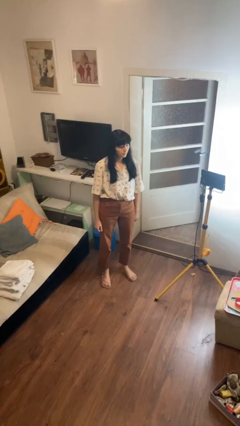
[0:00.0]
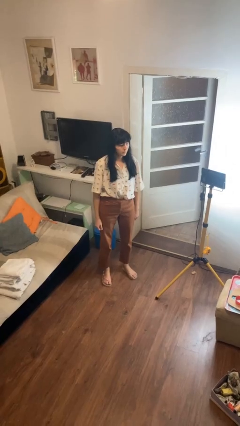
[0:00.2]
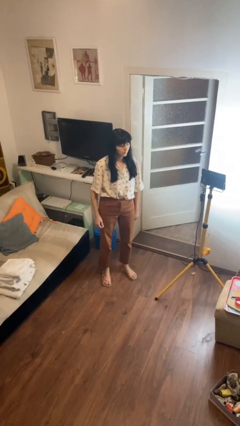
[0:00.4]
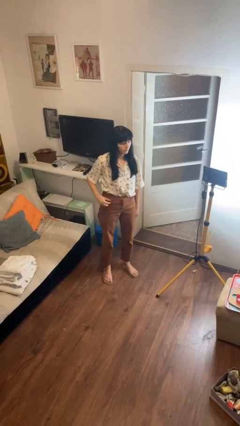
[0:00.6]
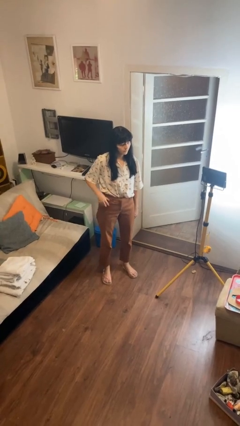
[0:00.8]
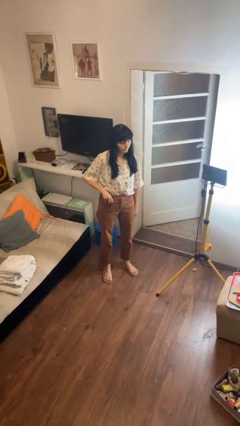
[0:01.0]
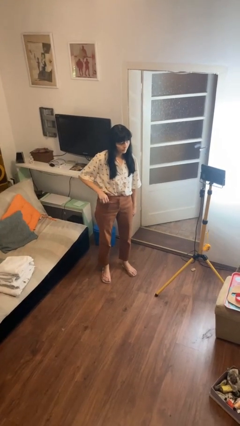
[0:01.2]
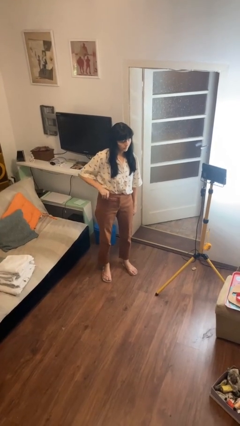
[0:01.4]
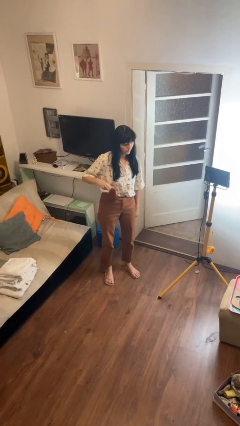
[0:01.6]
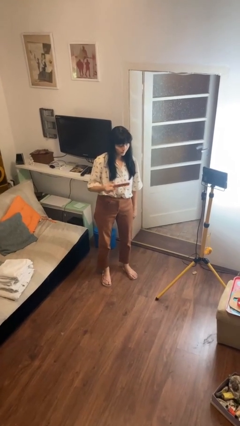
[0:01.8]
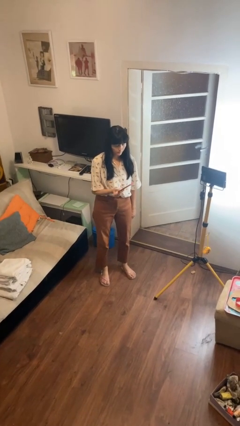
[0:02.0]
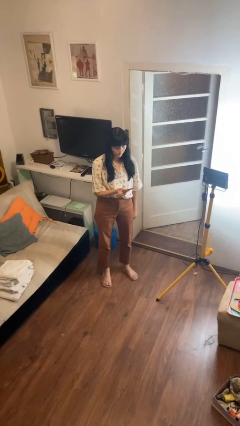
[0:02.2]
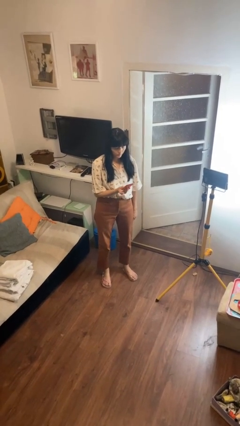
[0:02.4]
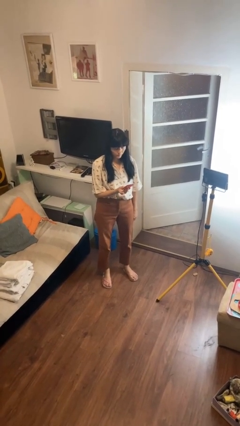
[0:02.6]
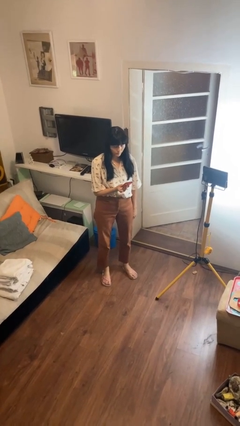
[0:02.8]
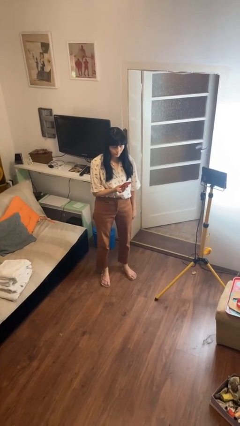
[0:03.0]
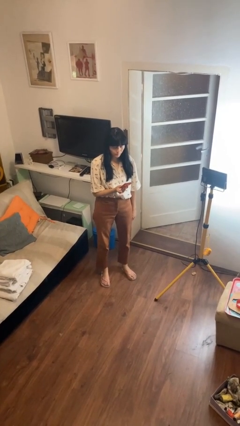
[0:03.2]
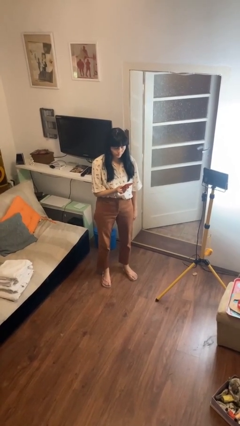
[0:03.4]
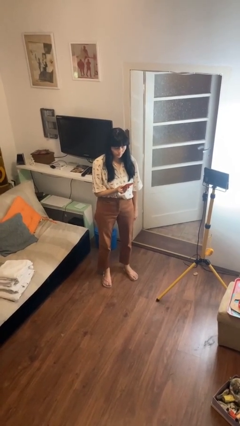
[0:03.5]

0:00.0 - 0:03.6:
person takes phone from pocket

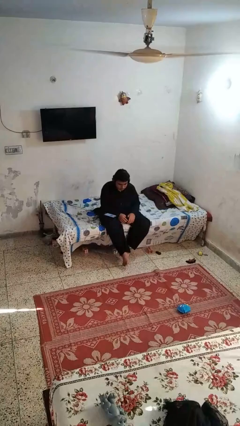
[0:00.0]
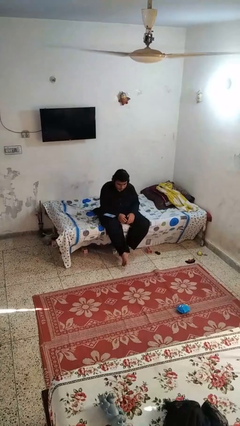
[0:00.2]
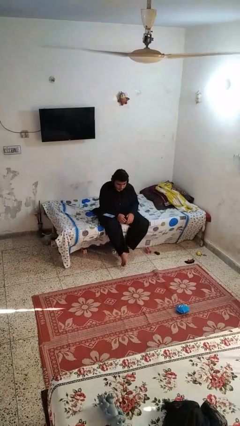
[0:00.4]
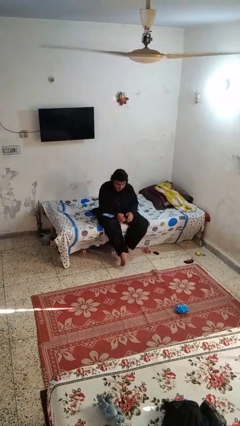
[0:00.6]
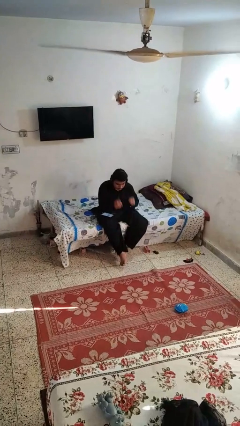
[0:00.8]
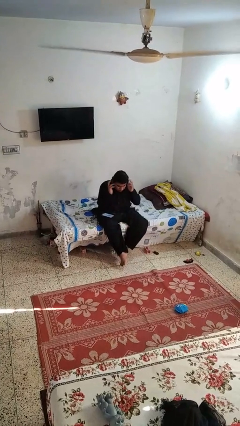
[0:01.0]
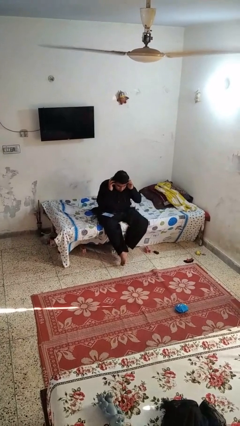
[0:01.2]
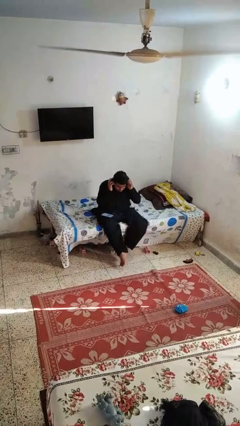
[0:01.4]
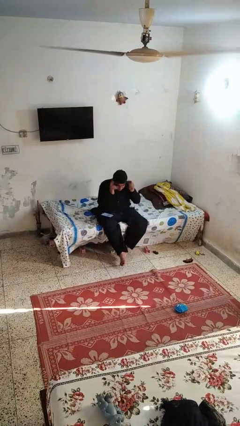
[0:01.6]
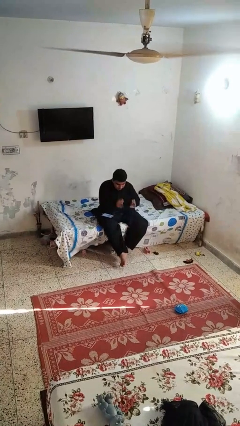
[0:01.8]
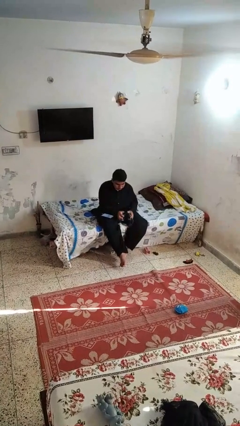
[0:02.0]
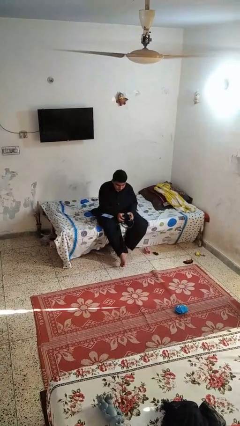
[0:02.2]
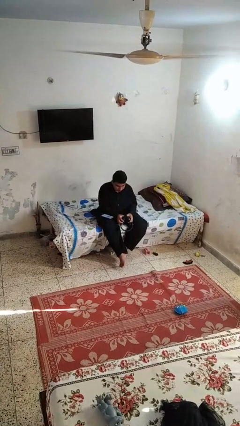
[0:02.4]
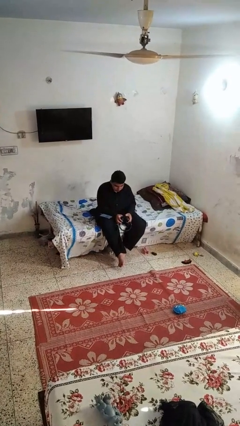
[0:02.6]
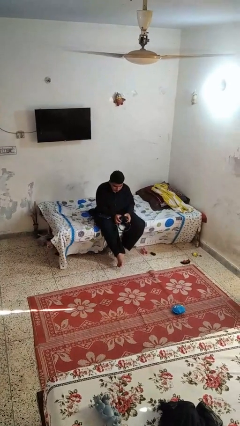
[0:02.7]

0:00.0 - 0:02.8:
person takes off headphones

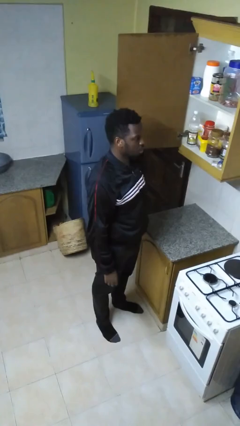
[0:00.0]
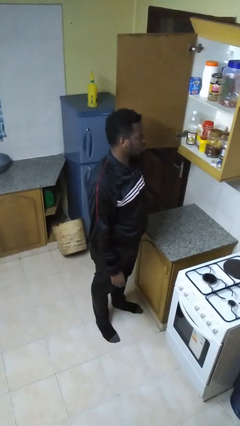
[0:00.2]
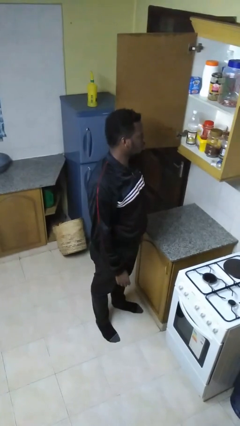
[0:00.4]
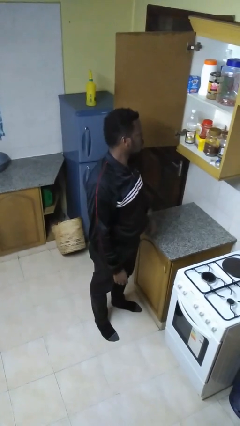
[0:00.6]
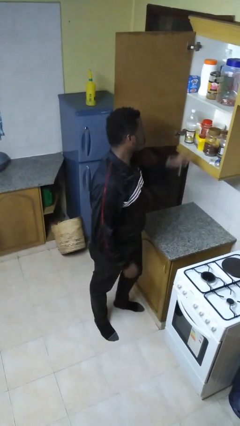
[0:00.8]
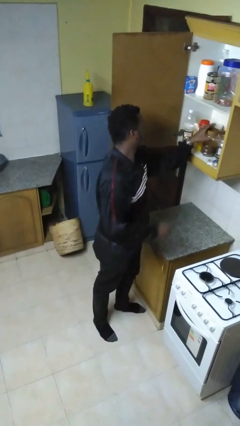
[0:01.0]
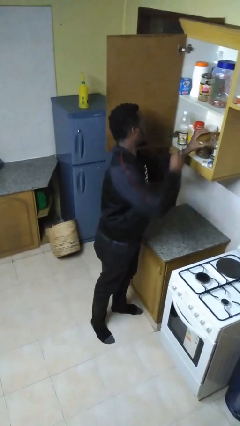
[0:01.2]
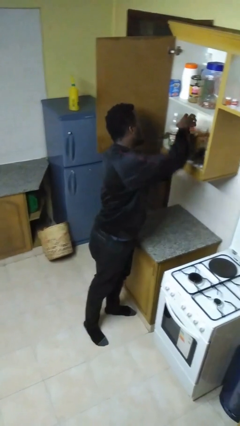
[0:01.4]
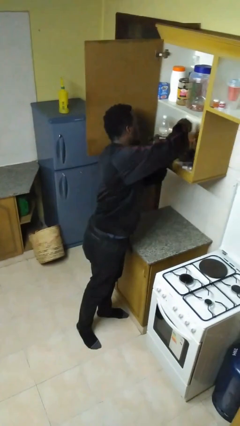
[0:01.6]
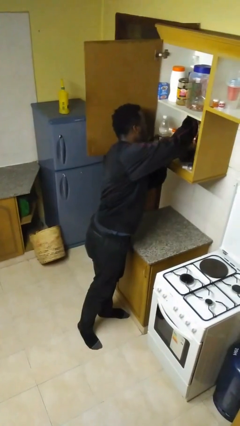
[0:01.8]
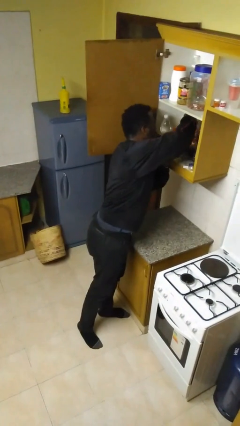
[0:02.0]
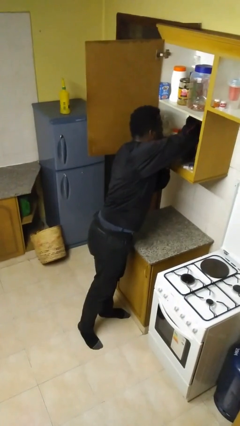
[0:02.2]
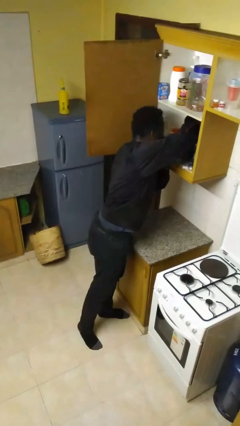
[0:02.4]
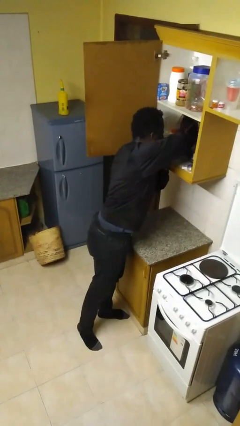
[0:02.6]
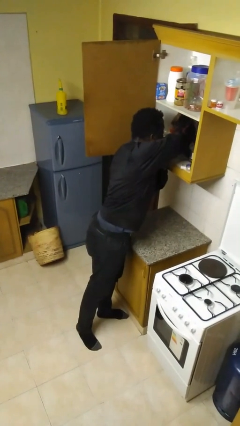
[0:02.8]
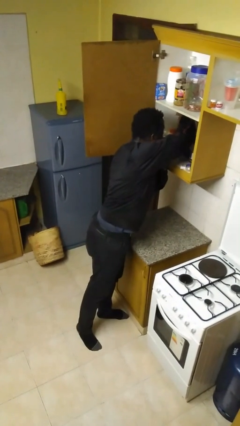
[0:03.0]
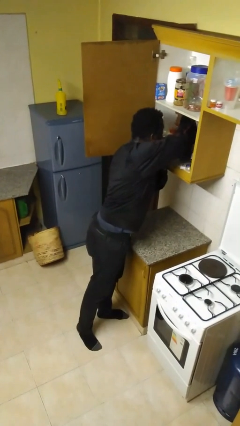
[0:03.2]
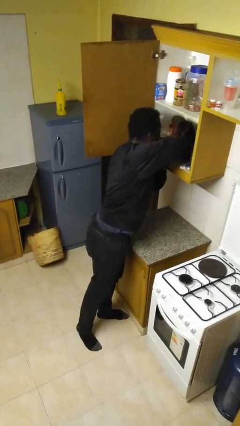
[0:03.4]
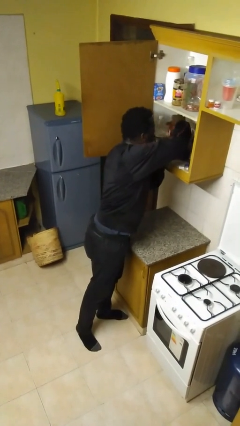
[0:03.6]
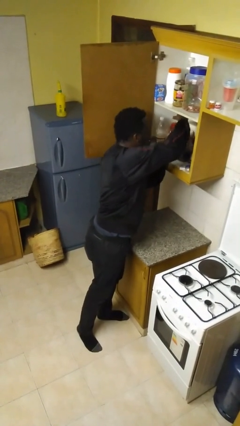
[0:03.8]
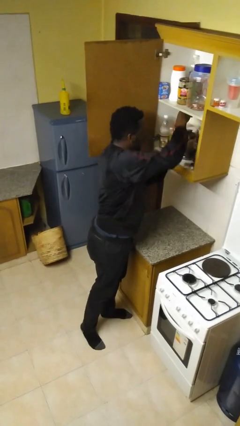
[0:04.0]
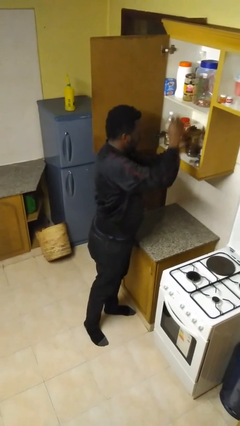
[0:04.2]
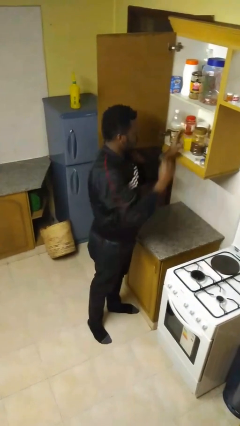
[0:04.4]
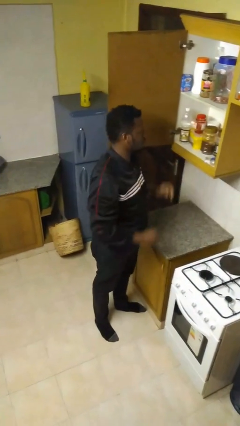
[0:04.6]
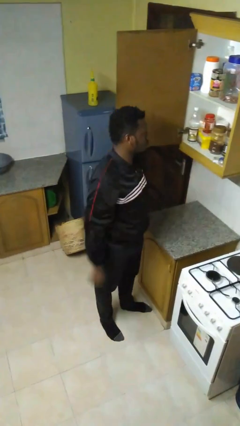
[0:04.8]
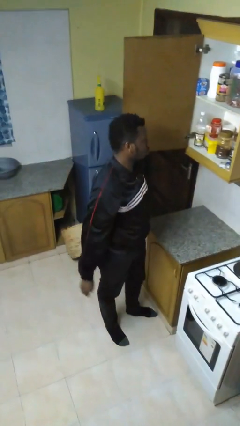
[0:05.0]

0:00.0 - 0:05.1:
person searches in cabinet

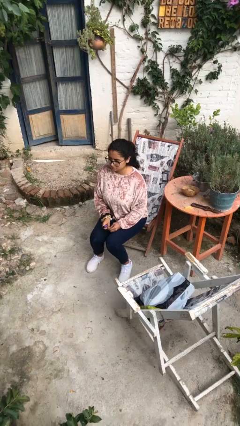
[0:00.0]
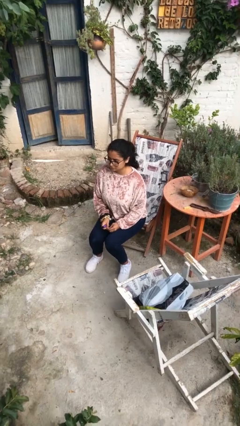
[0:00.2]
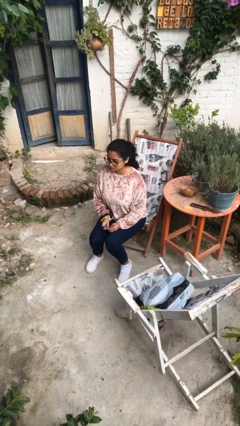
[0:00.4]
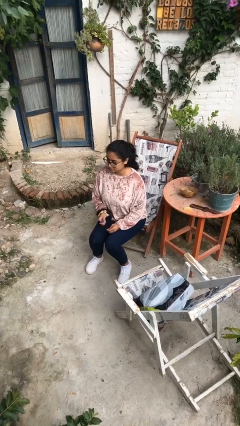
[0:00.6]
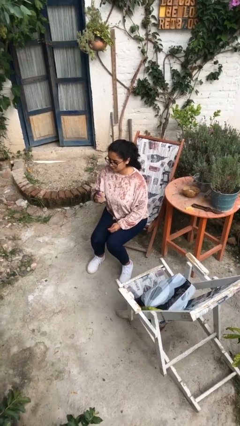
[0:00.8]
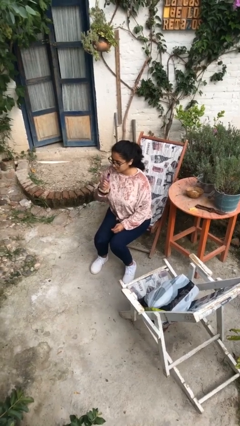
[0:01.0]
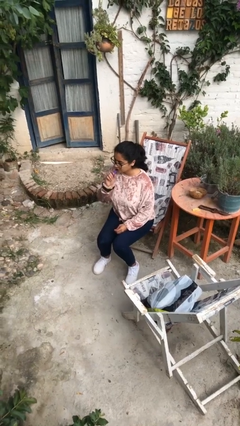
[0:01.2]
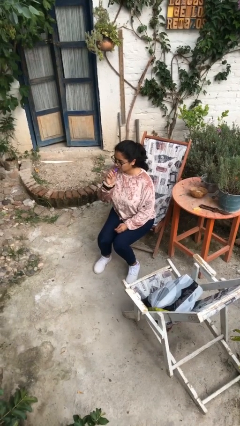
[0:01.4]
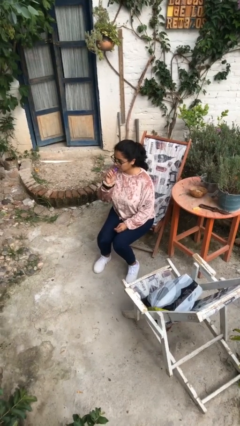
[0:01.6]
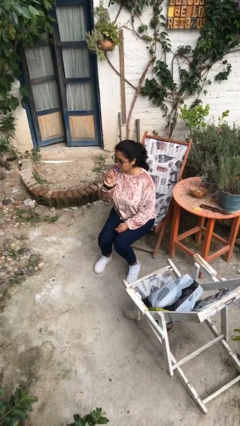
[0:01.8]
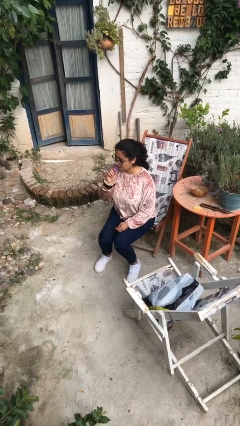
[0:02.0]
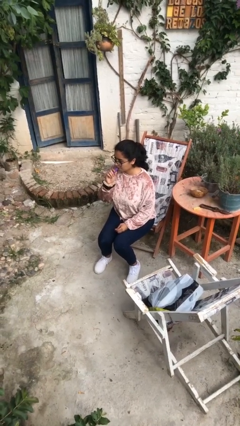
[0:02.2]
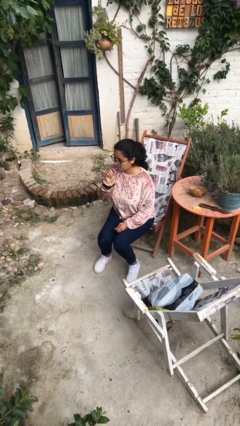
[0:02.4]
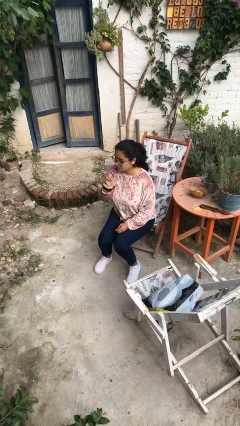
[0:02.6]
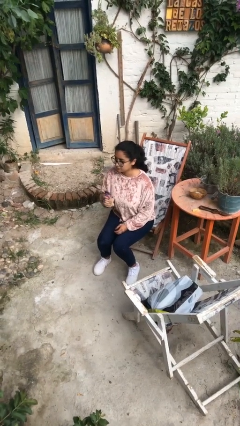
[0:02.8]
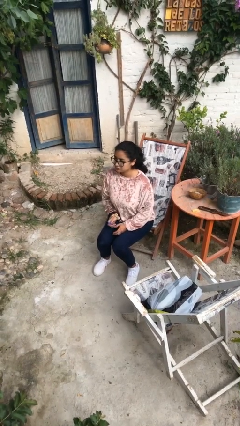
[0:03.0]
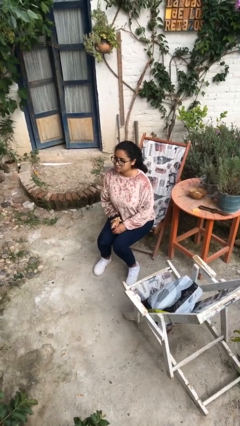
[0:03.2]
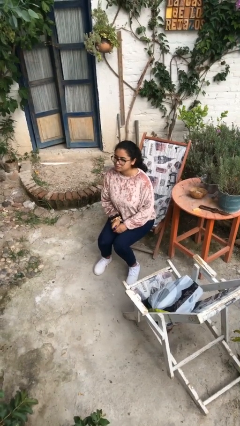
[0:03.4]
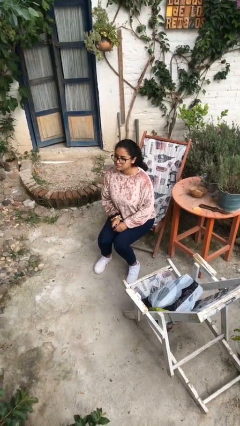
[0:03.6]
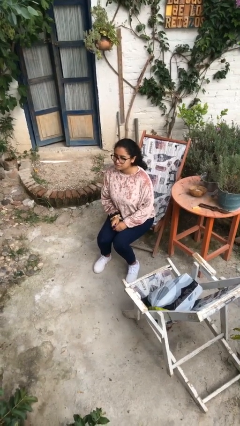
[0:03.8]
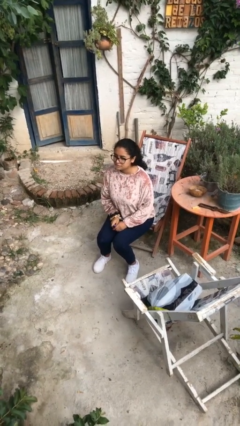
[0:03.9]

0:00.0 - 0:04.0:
person vapes

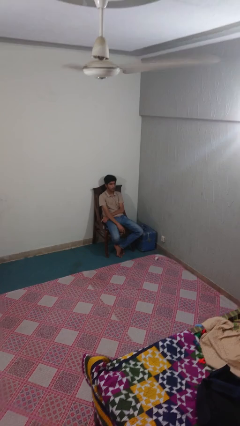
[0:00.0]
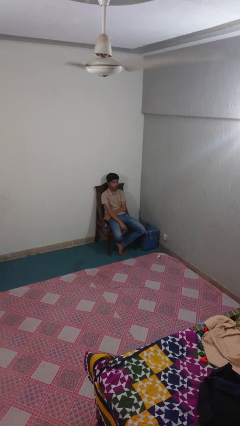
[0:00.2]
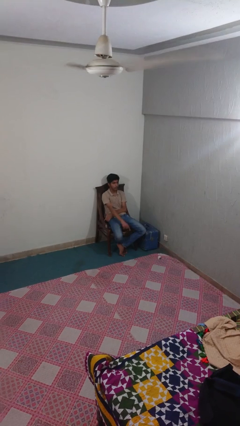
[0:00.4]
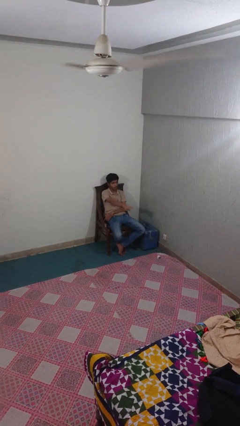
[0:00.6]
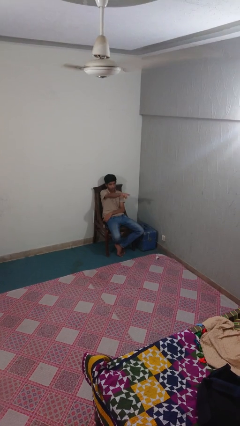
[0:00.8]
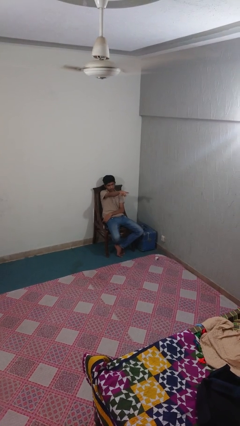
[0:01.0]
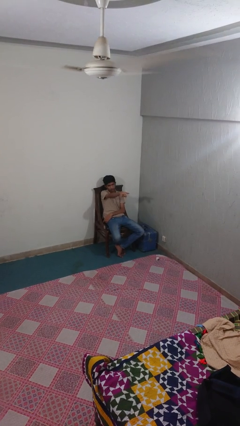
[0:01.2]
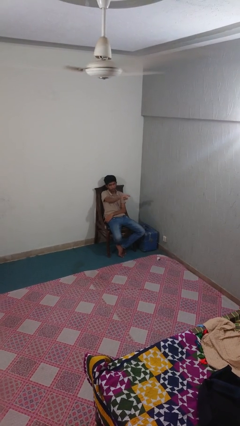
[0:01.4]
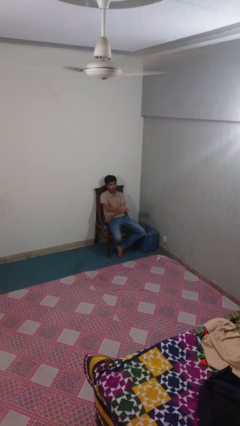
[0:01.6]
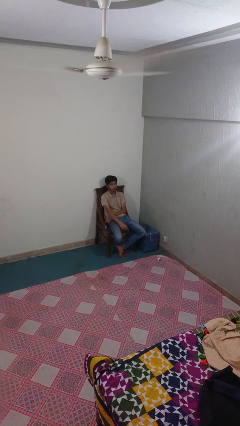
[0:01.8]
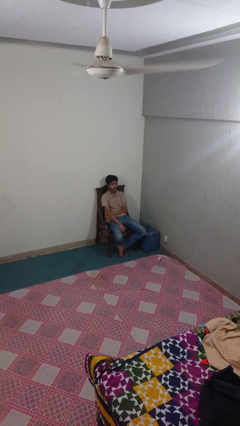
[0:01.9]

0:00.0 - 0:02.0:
person points at person

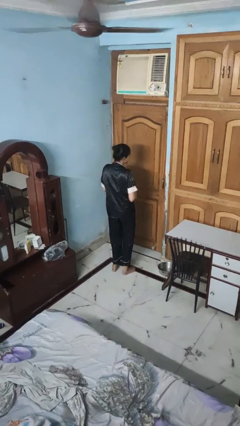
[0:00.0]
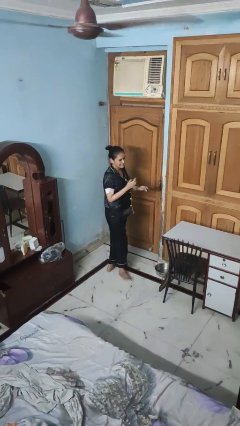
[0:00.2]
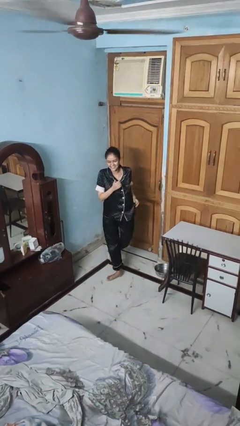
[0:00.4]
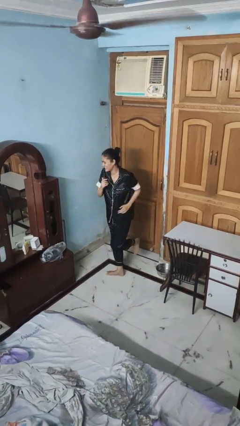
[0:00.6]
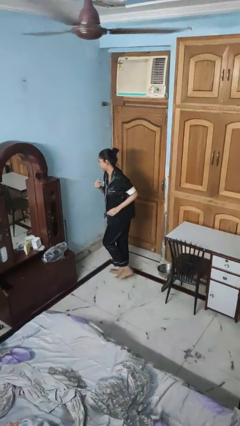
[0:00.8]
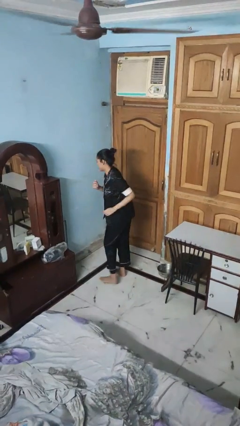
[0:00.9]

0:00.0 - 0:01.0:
person twirls
